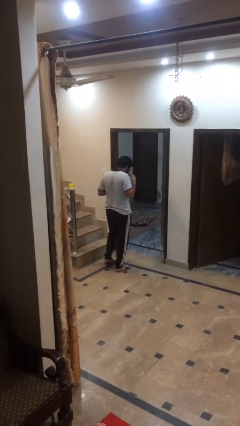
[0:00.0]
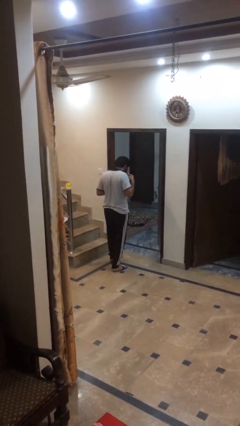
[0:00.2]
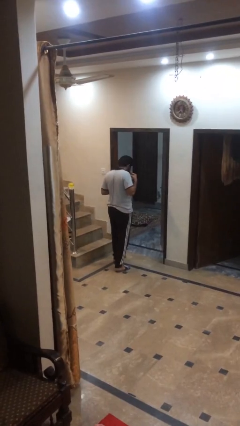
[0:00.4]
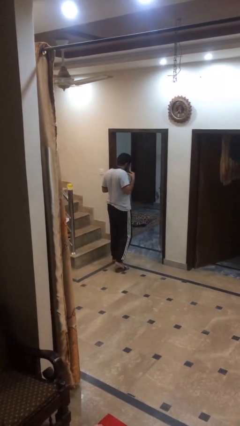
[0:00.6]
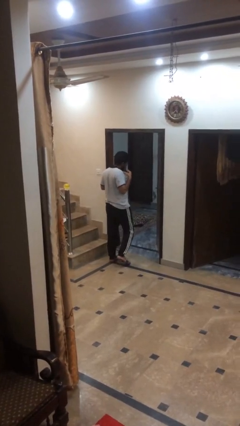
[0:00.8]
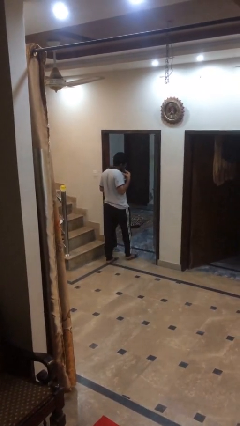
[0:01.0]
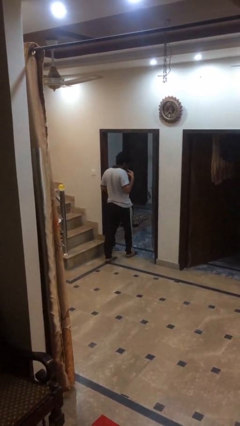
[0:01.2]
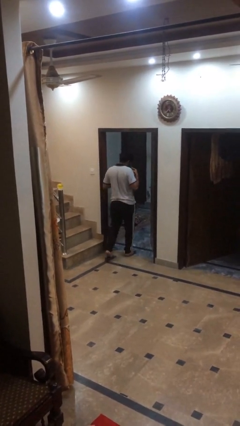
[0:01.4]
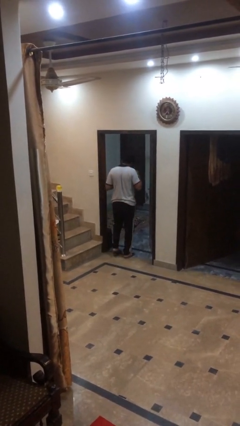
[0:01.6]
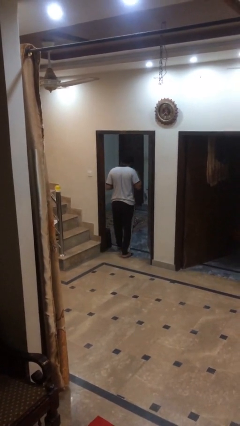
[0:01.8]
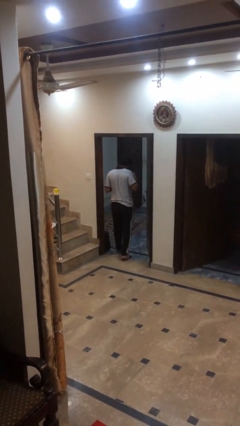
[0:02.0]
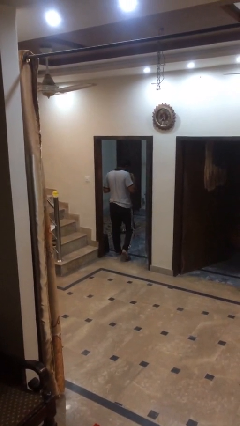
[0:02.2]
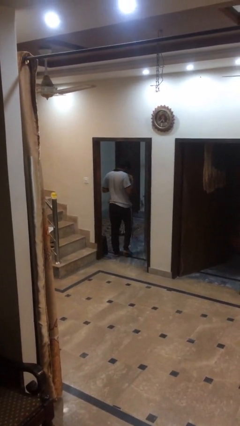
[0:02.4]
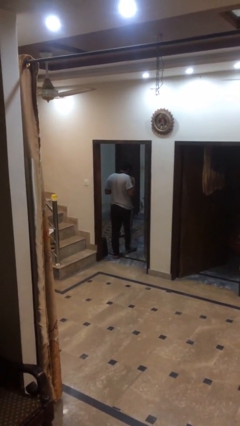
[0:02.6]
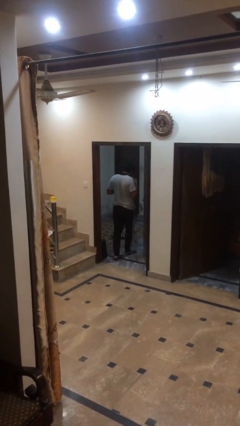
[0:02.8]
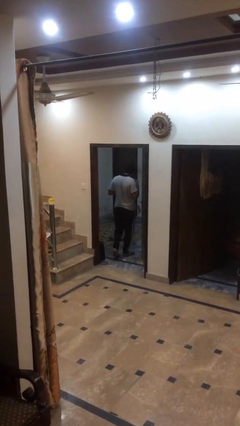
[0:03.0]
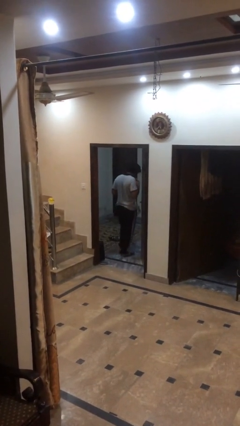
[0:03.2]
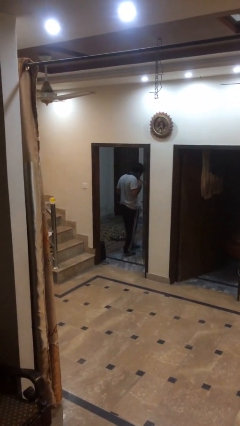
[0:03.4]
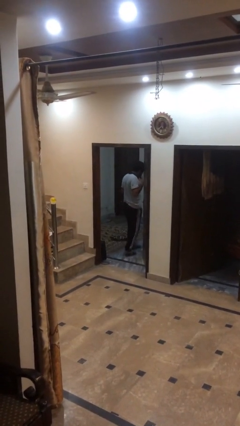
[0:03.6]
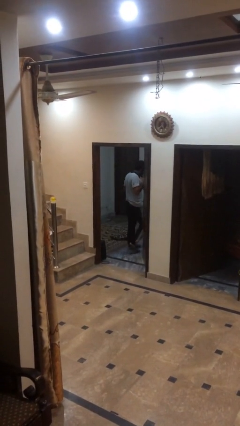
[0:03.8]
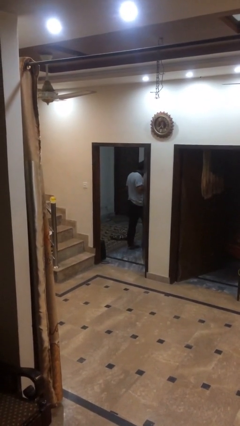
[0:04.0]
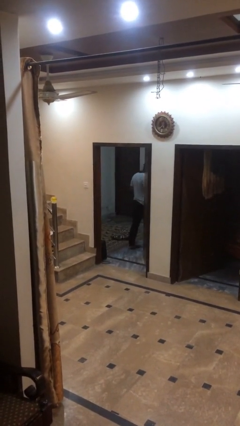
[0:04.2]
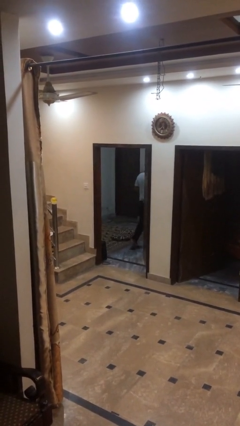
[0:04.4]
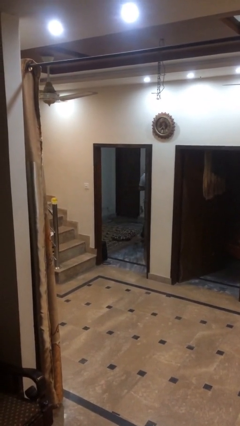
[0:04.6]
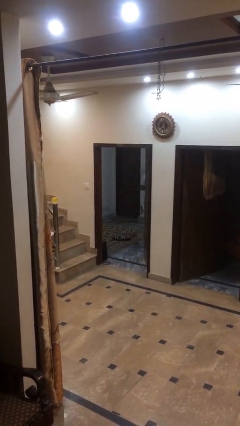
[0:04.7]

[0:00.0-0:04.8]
person exits scene through structure

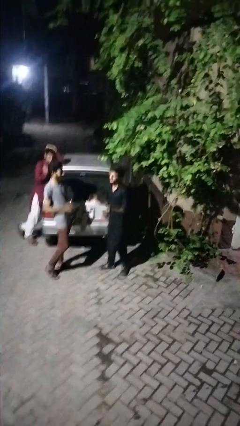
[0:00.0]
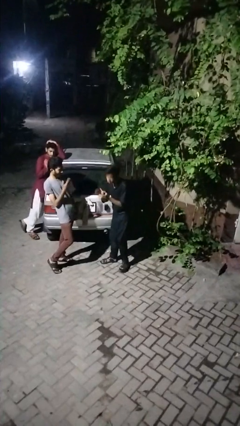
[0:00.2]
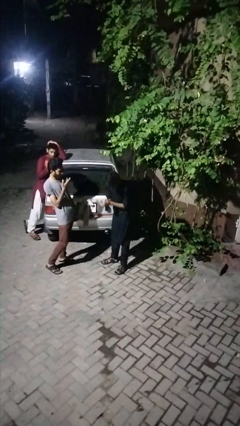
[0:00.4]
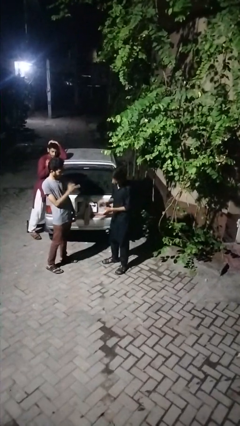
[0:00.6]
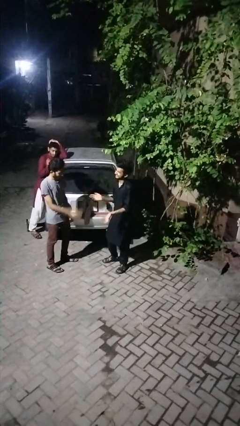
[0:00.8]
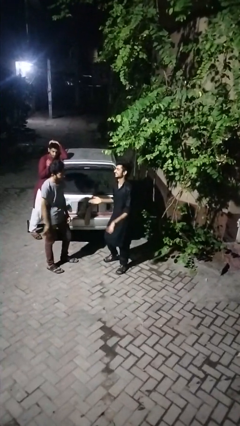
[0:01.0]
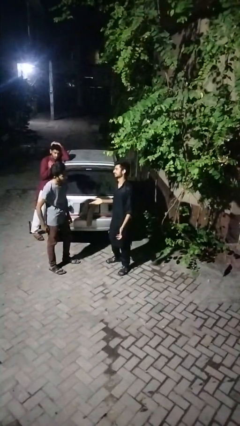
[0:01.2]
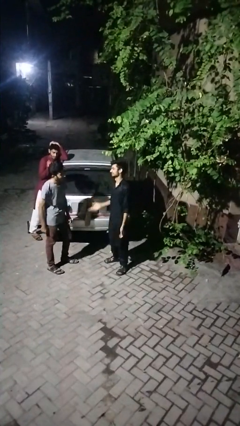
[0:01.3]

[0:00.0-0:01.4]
person laughs with person

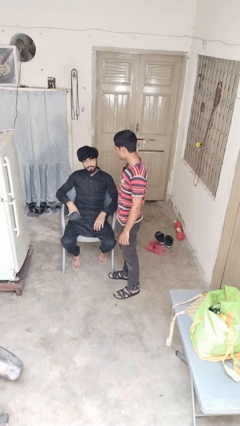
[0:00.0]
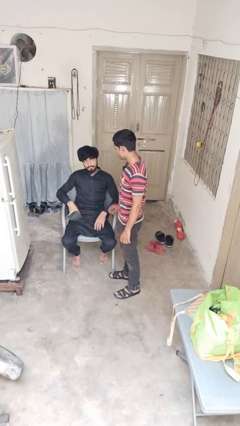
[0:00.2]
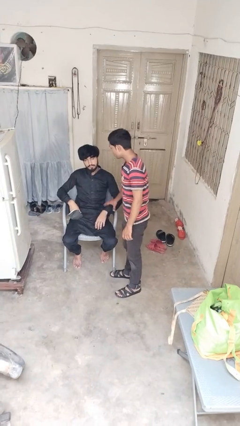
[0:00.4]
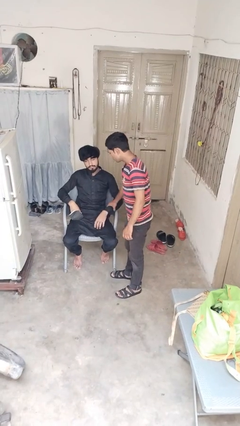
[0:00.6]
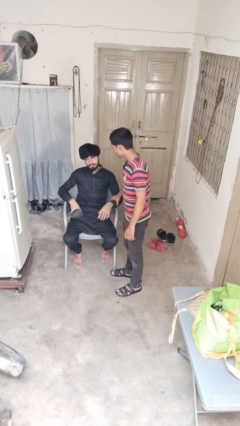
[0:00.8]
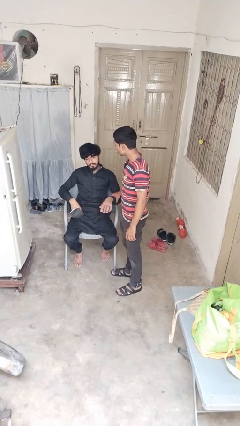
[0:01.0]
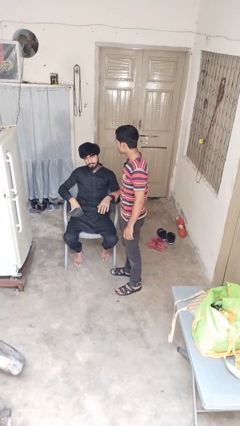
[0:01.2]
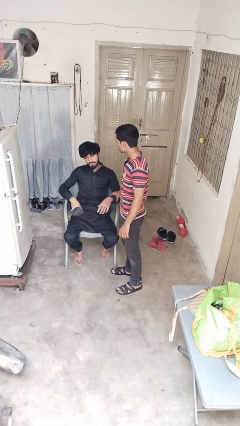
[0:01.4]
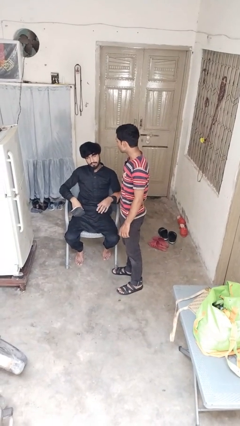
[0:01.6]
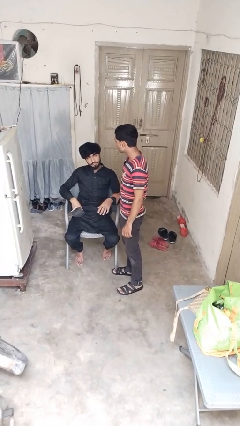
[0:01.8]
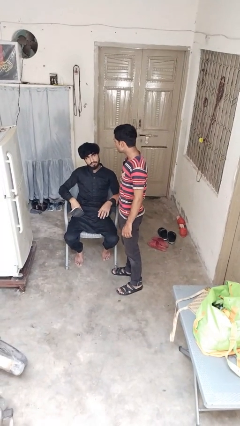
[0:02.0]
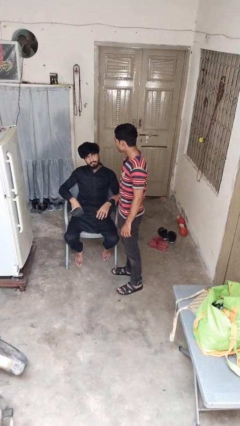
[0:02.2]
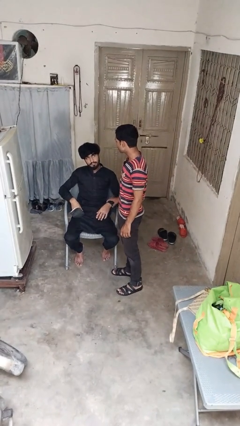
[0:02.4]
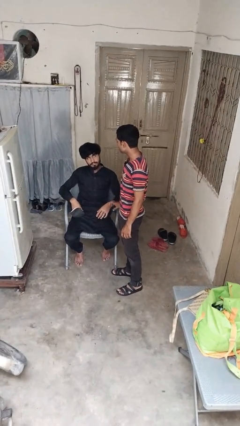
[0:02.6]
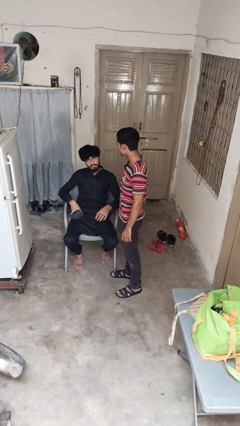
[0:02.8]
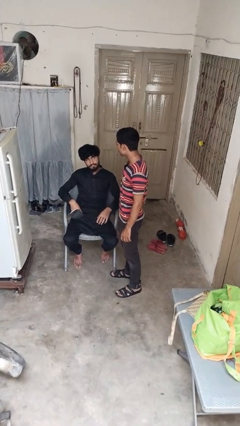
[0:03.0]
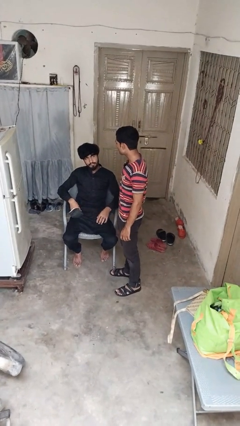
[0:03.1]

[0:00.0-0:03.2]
person grabs person by forearm

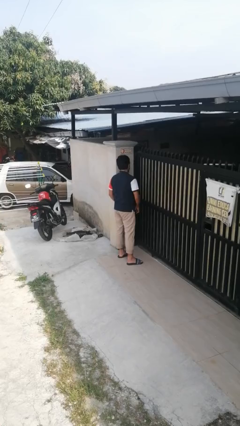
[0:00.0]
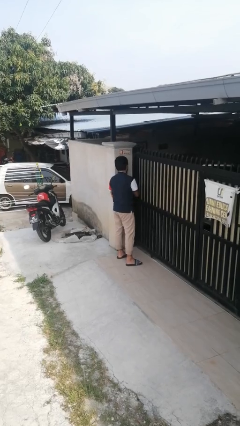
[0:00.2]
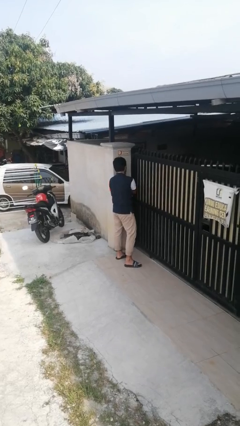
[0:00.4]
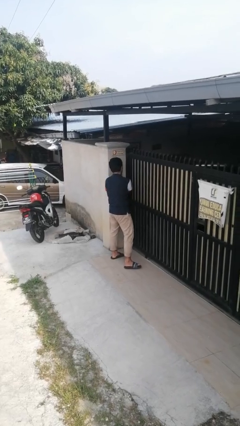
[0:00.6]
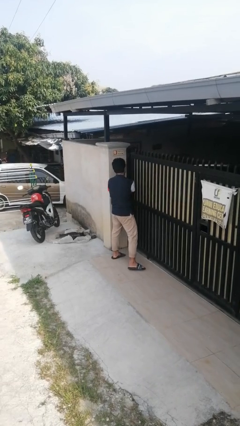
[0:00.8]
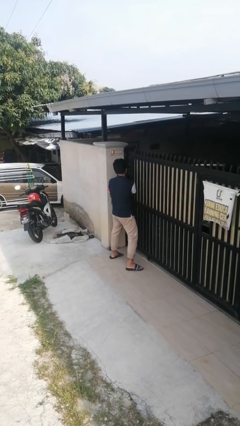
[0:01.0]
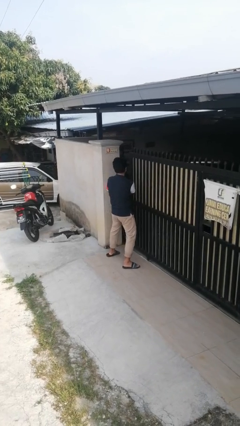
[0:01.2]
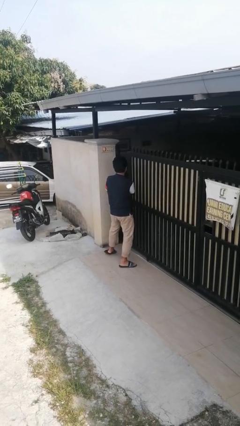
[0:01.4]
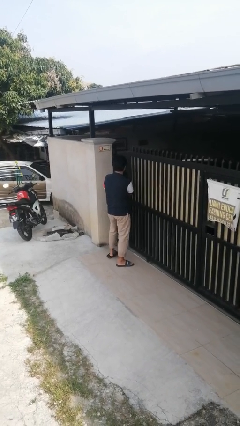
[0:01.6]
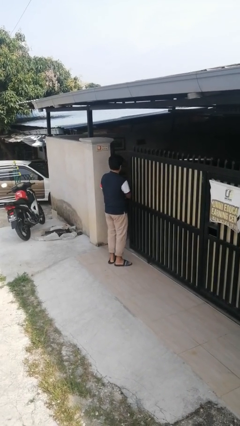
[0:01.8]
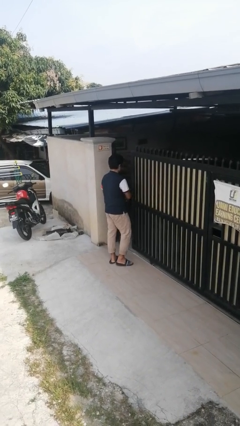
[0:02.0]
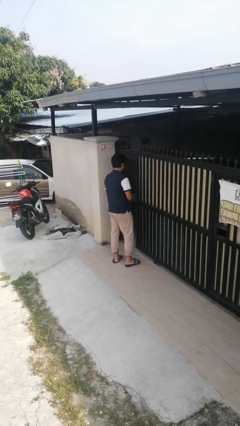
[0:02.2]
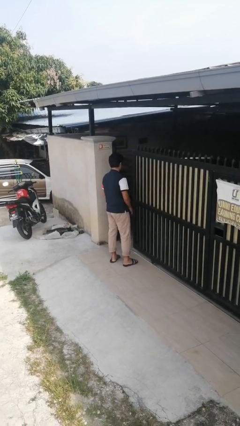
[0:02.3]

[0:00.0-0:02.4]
person opens sliding door

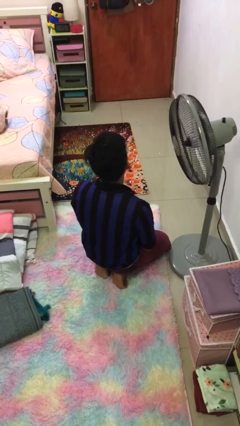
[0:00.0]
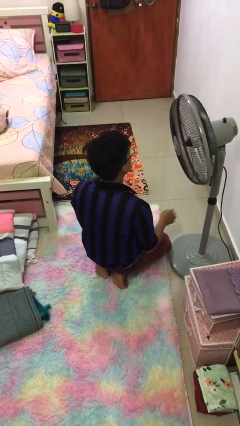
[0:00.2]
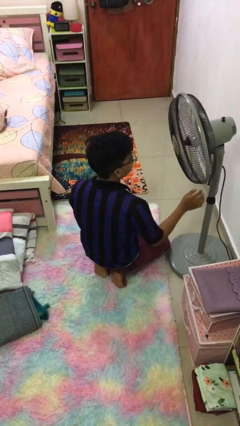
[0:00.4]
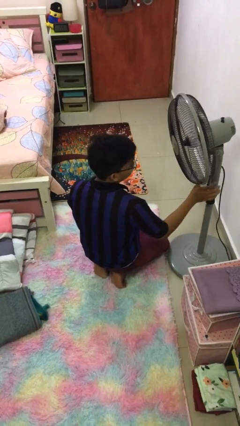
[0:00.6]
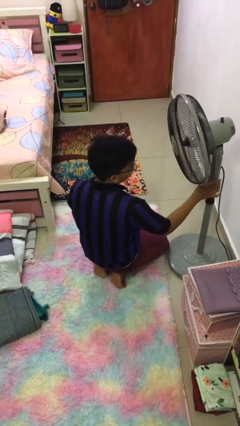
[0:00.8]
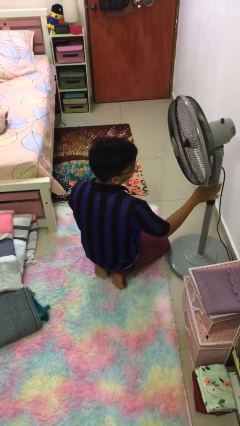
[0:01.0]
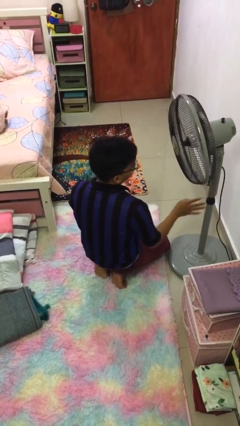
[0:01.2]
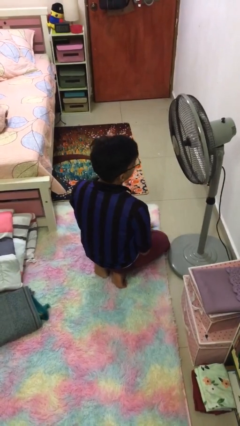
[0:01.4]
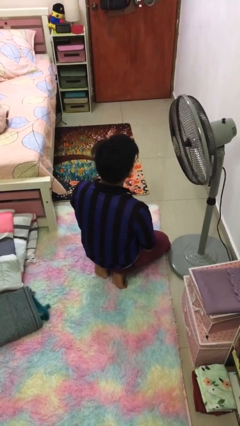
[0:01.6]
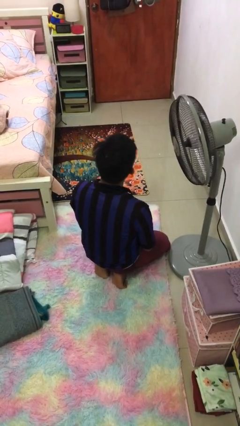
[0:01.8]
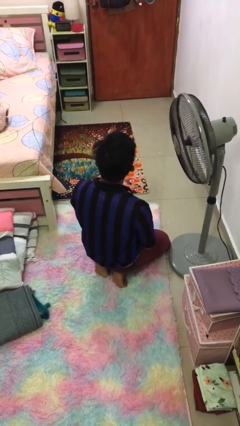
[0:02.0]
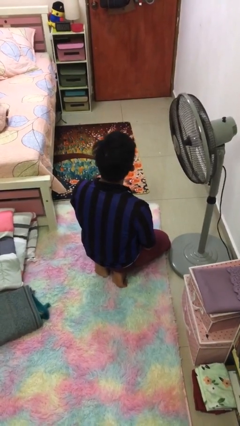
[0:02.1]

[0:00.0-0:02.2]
person turns on fan

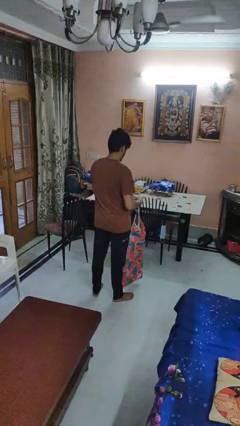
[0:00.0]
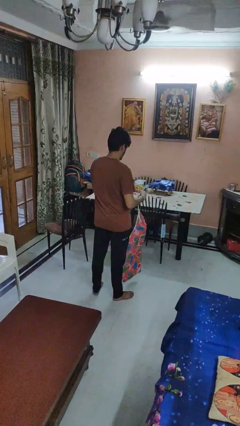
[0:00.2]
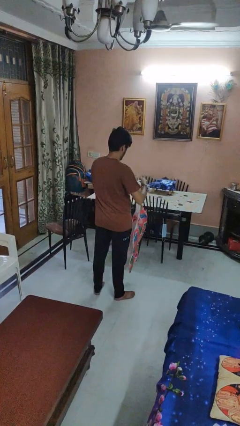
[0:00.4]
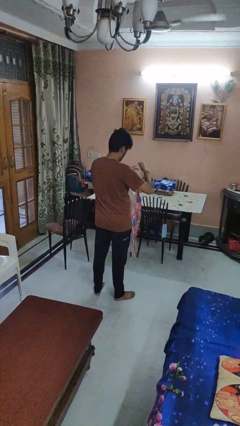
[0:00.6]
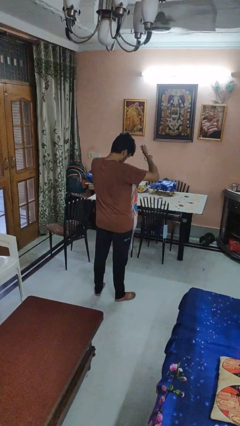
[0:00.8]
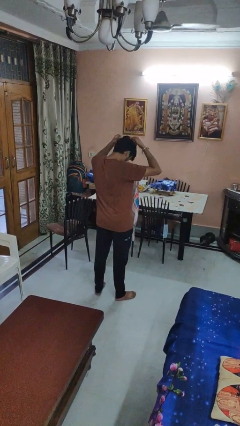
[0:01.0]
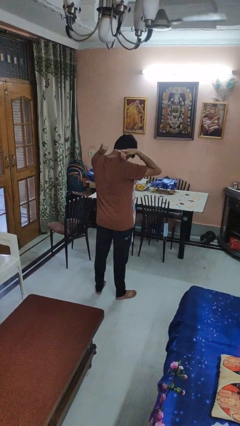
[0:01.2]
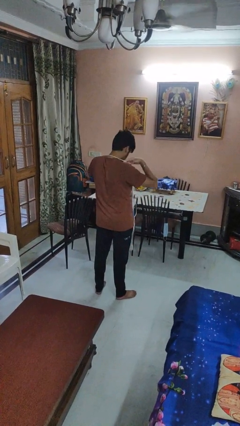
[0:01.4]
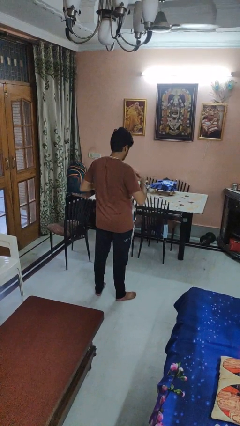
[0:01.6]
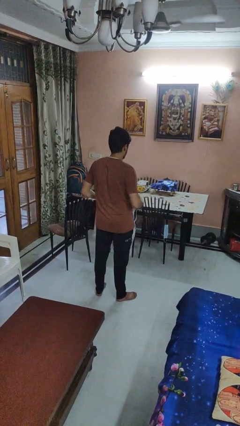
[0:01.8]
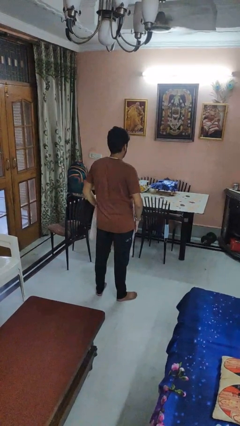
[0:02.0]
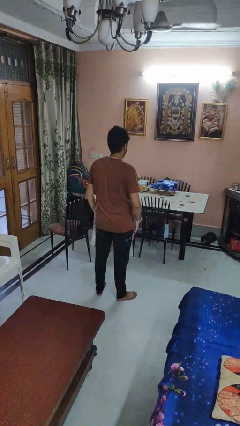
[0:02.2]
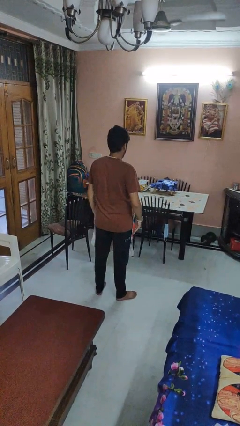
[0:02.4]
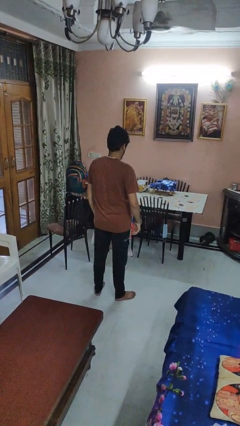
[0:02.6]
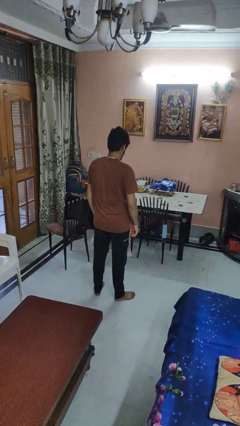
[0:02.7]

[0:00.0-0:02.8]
person puts on apron

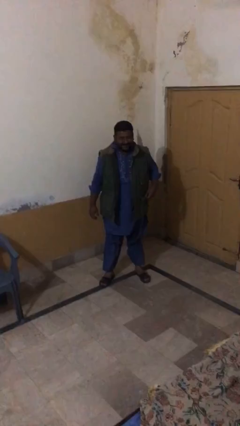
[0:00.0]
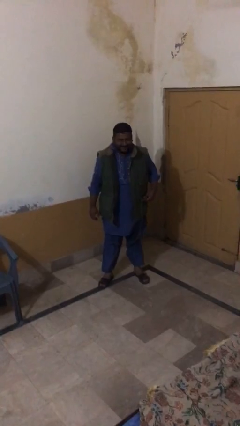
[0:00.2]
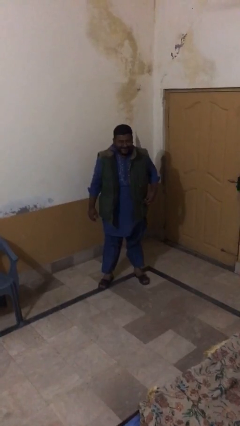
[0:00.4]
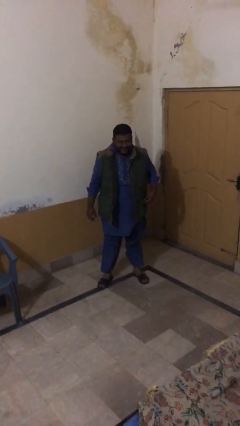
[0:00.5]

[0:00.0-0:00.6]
person stands up
